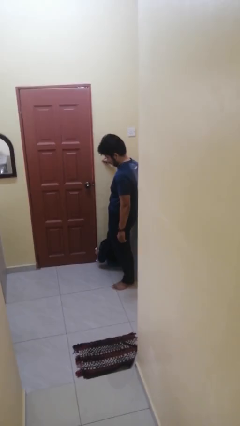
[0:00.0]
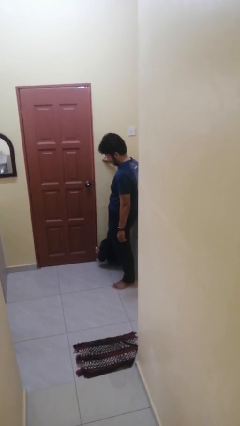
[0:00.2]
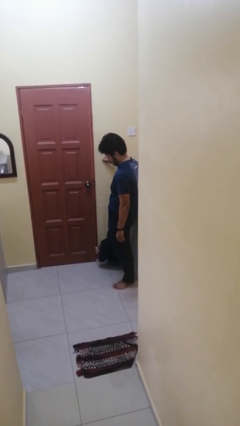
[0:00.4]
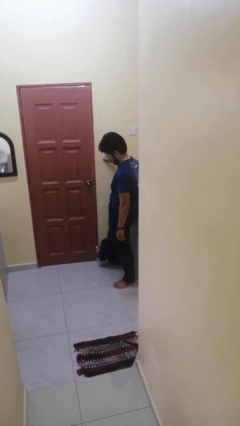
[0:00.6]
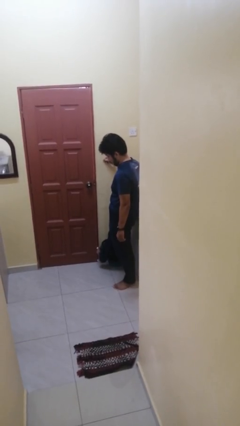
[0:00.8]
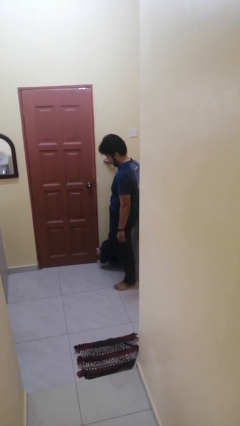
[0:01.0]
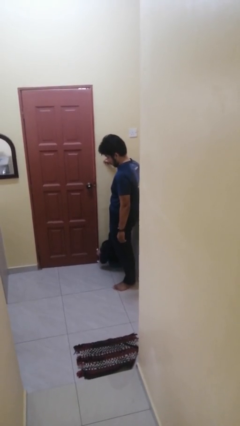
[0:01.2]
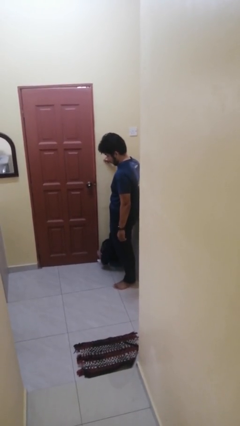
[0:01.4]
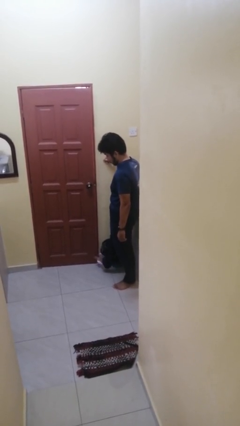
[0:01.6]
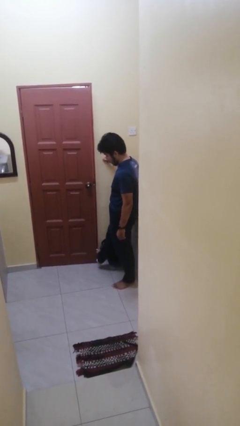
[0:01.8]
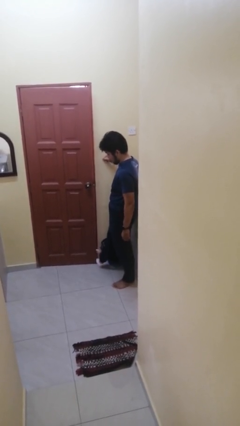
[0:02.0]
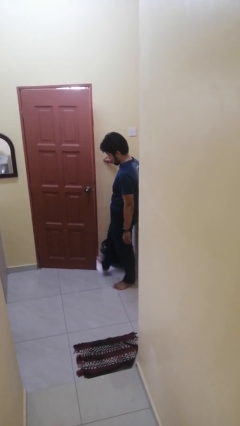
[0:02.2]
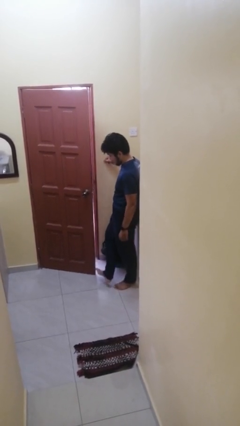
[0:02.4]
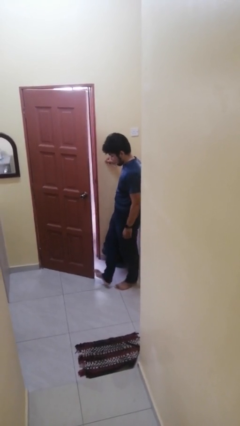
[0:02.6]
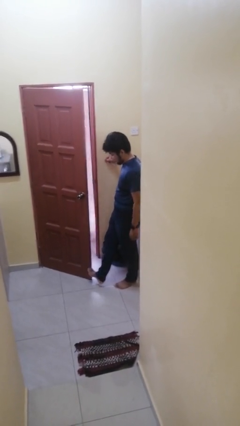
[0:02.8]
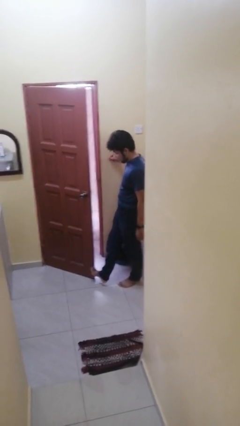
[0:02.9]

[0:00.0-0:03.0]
person opens facility door

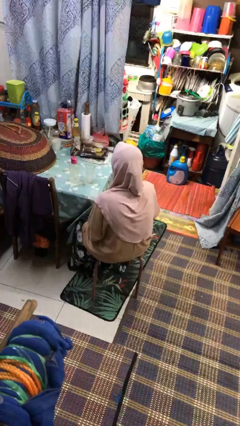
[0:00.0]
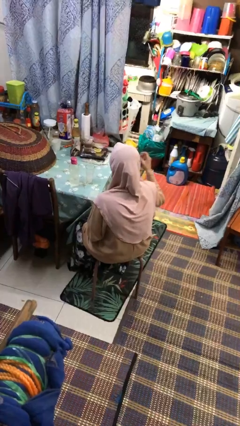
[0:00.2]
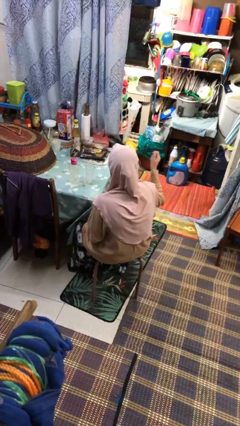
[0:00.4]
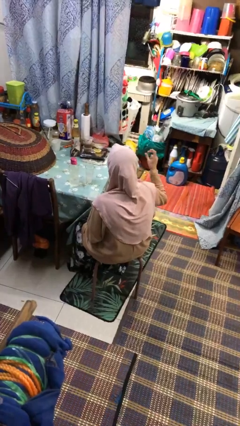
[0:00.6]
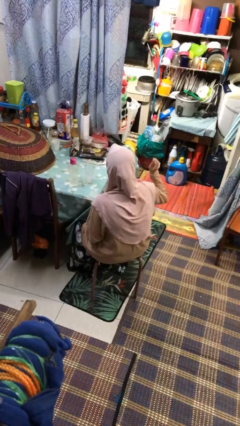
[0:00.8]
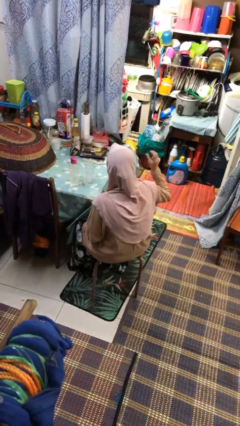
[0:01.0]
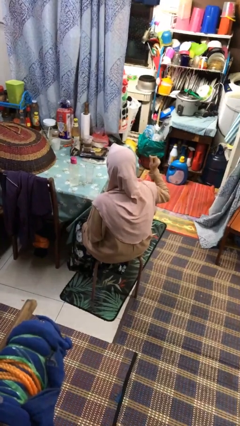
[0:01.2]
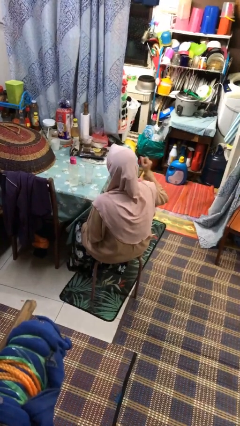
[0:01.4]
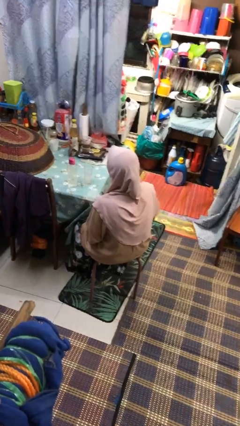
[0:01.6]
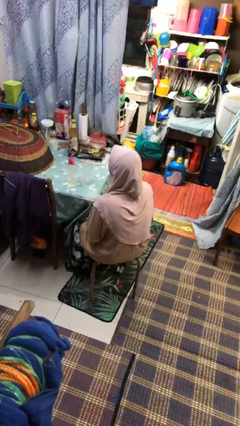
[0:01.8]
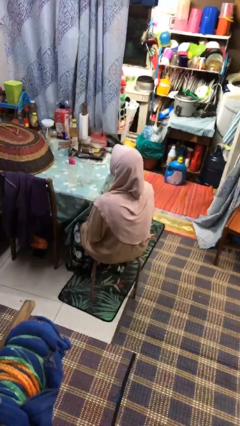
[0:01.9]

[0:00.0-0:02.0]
person snaps fingers

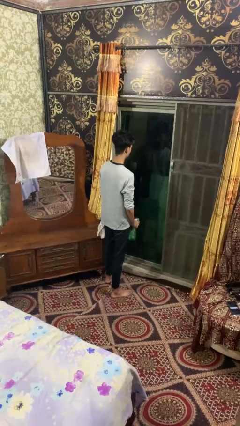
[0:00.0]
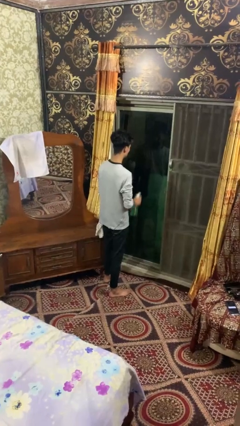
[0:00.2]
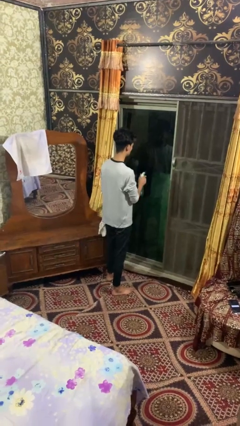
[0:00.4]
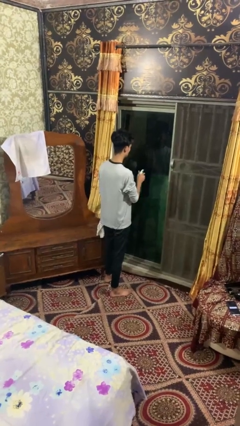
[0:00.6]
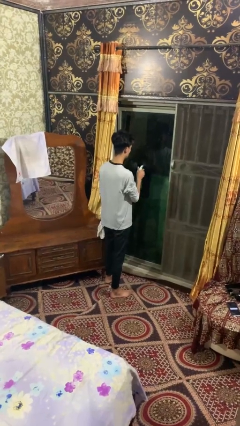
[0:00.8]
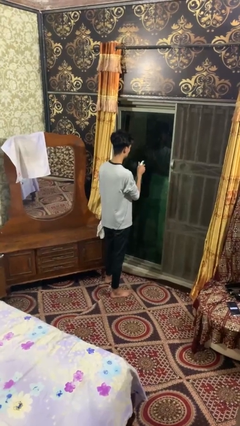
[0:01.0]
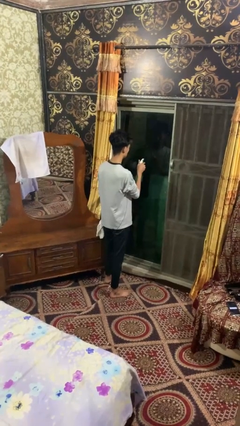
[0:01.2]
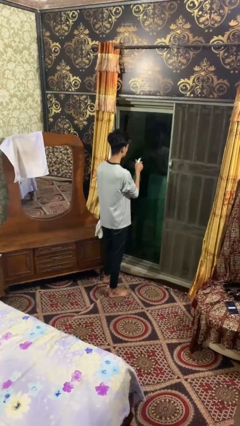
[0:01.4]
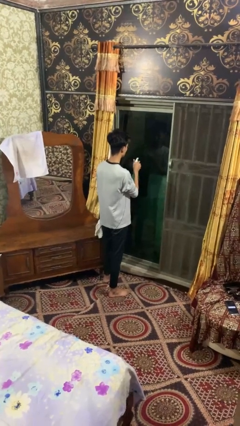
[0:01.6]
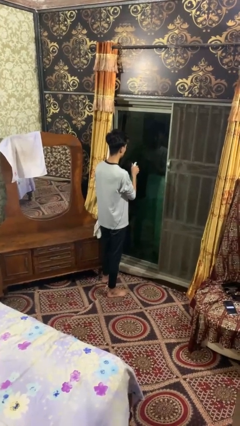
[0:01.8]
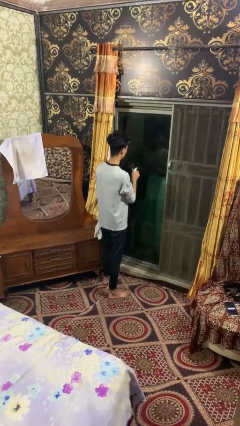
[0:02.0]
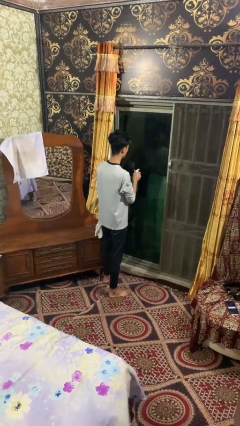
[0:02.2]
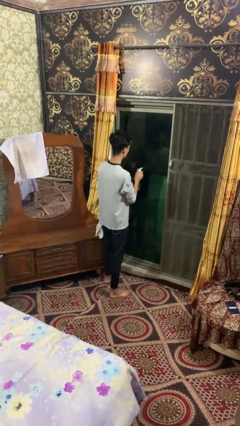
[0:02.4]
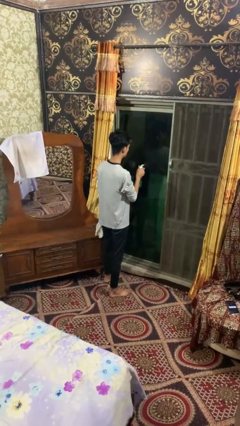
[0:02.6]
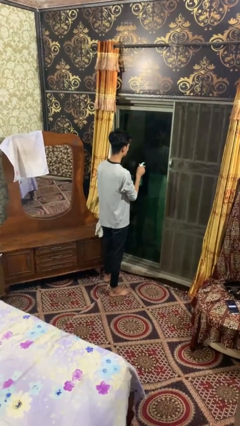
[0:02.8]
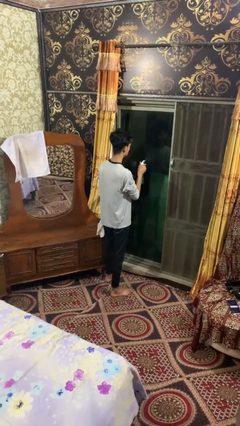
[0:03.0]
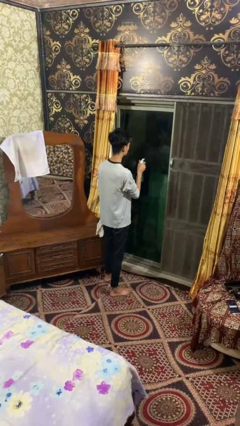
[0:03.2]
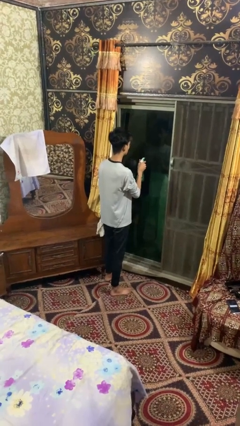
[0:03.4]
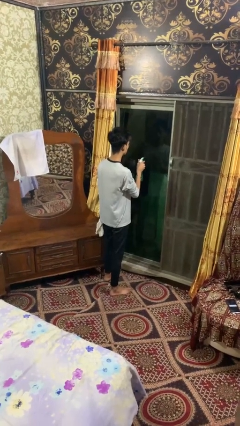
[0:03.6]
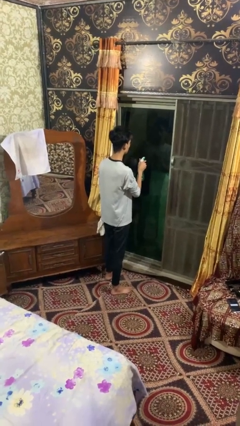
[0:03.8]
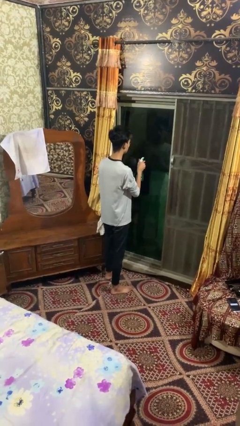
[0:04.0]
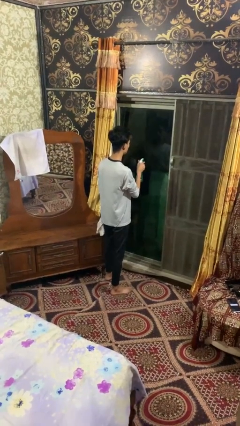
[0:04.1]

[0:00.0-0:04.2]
person sprays from bottle

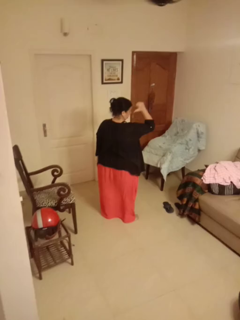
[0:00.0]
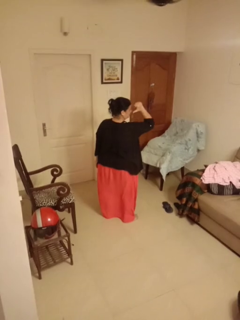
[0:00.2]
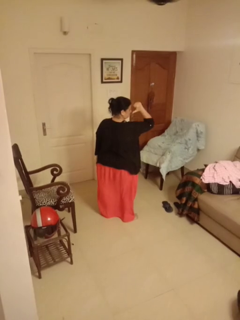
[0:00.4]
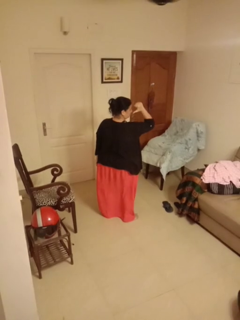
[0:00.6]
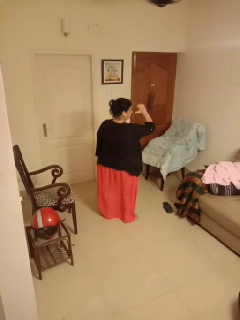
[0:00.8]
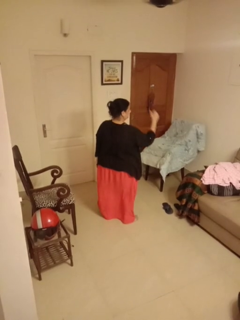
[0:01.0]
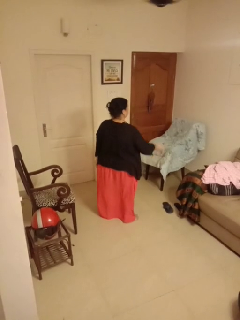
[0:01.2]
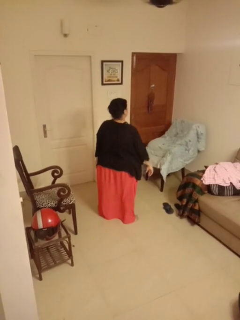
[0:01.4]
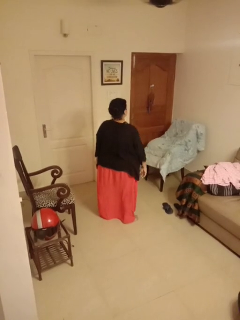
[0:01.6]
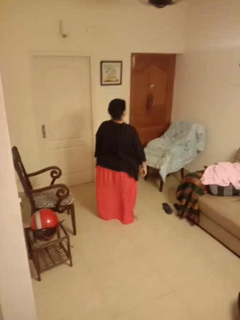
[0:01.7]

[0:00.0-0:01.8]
person gestures behind me

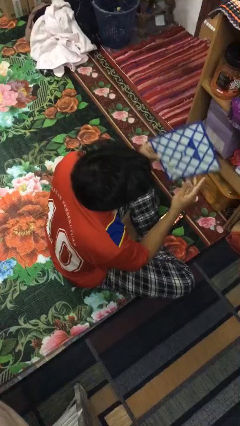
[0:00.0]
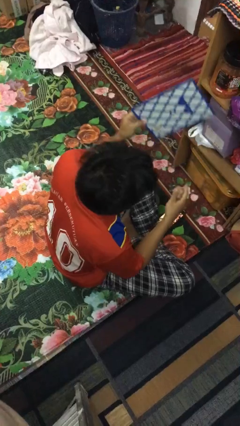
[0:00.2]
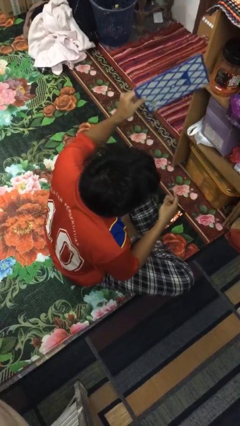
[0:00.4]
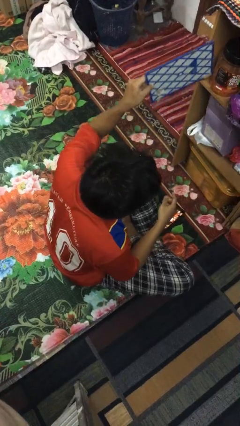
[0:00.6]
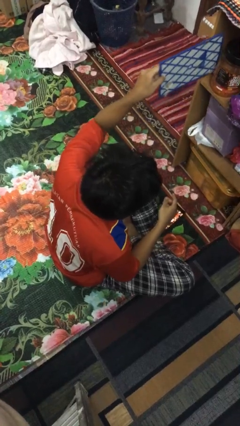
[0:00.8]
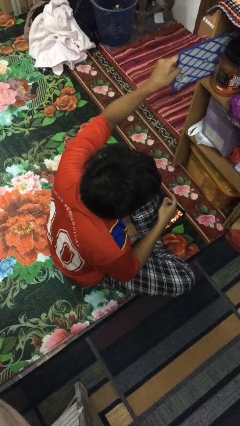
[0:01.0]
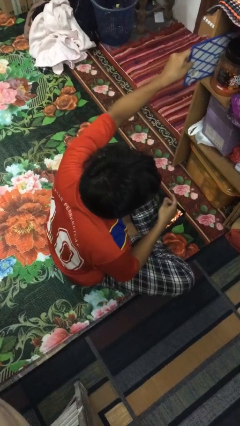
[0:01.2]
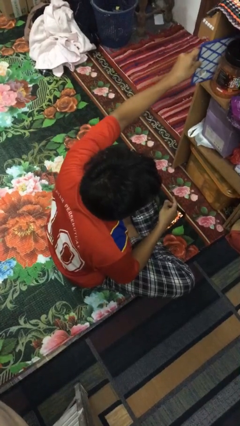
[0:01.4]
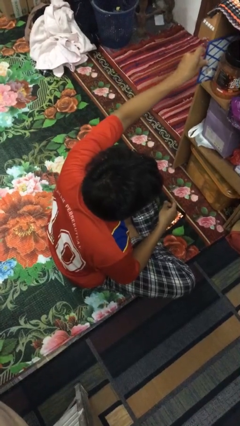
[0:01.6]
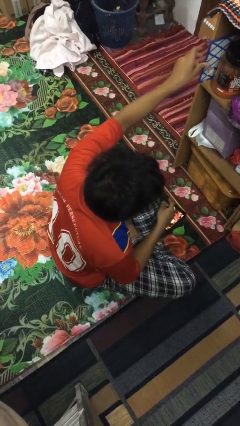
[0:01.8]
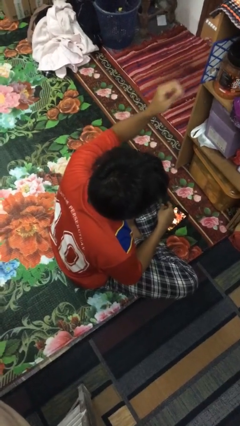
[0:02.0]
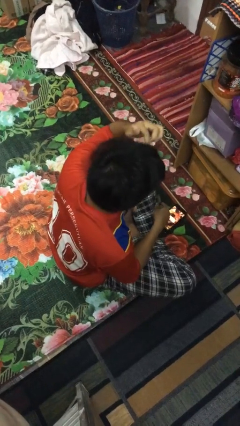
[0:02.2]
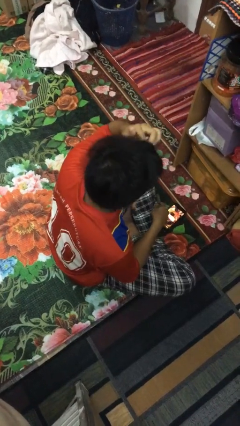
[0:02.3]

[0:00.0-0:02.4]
person puts down object into cabinet

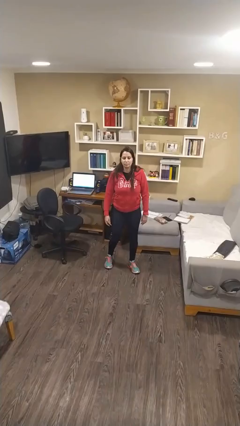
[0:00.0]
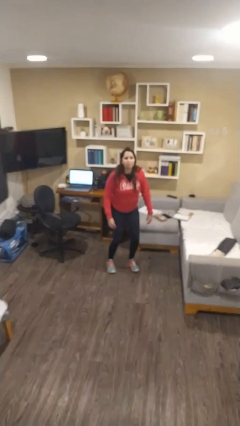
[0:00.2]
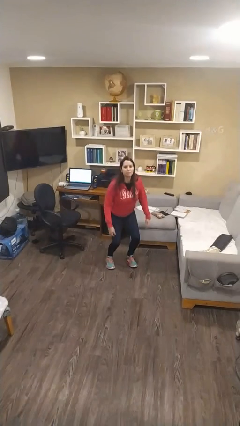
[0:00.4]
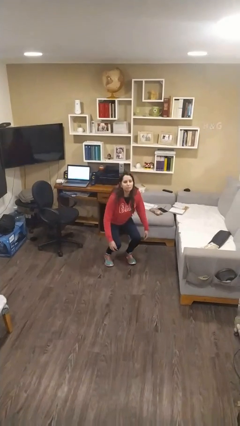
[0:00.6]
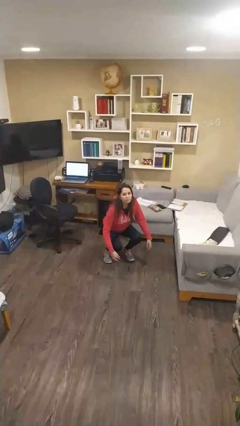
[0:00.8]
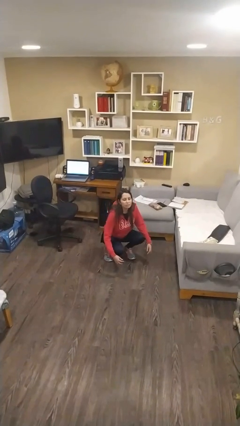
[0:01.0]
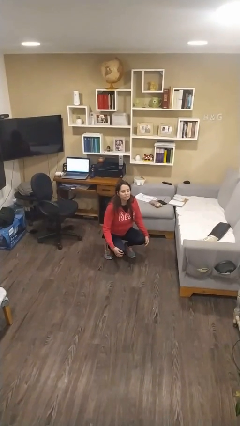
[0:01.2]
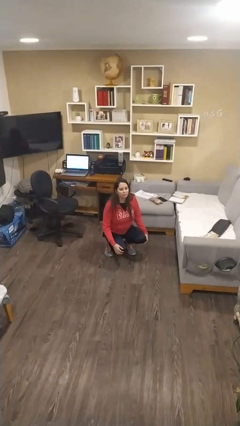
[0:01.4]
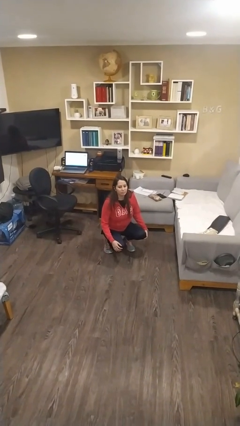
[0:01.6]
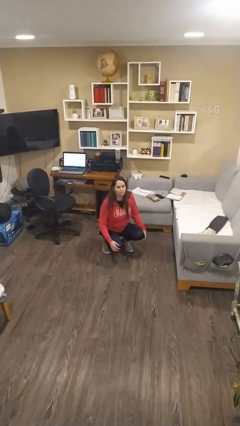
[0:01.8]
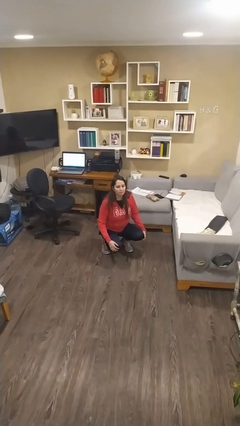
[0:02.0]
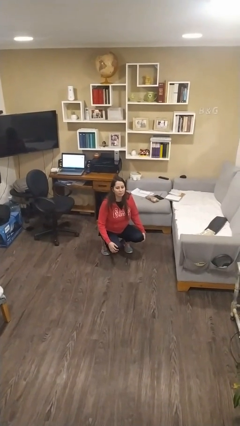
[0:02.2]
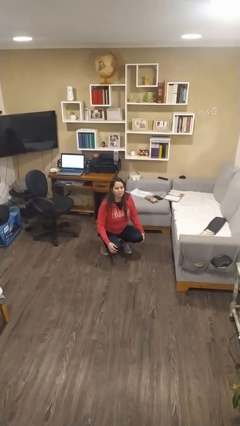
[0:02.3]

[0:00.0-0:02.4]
person squats

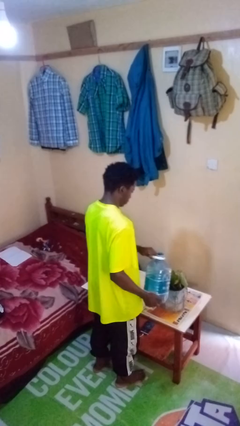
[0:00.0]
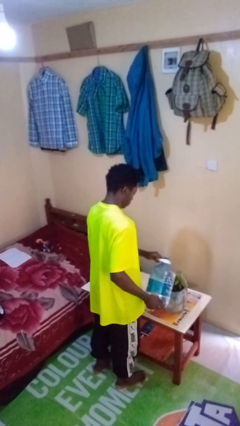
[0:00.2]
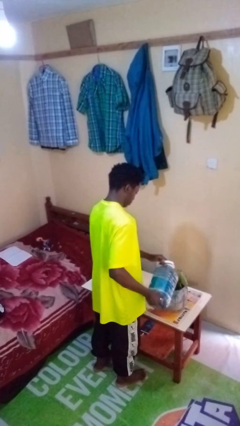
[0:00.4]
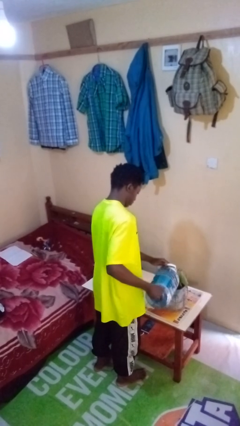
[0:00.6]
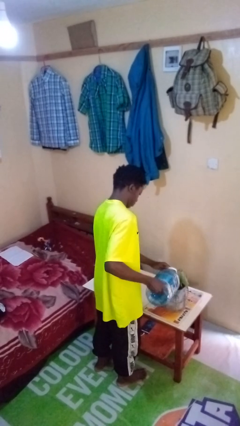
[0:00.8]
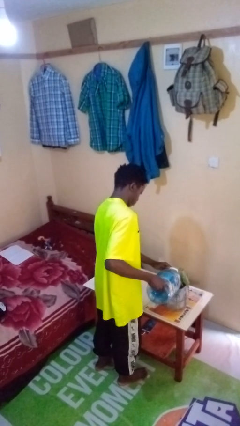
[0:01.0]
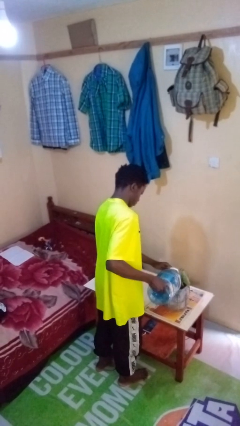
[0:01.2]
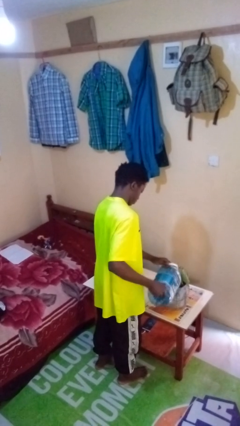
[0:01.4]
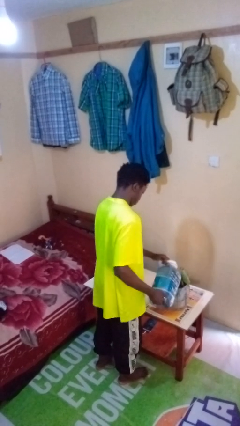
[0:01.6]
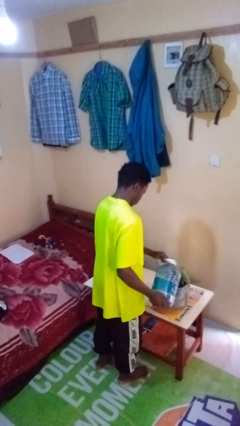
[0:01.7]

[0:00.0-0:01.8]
person waters houseplant

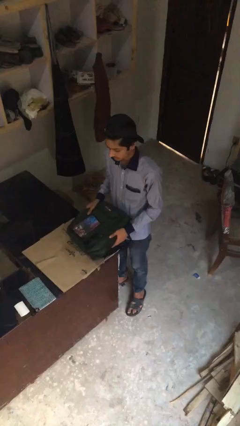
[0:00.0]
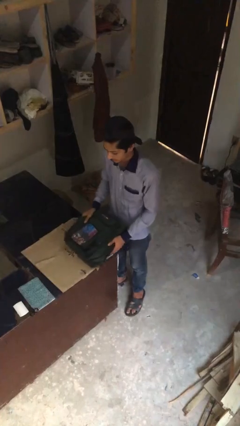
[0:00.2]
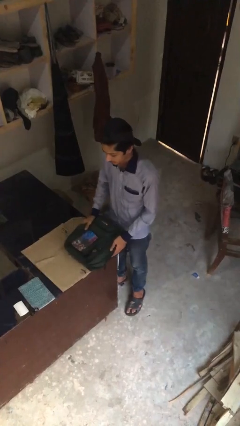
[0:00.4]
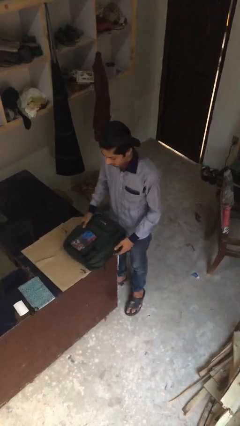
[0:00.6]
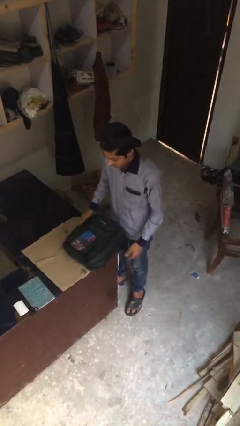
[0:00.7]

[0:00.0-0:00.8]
person puts down object on table
